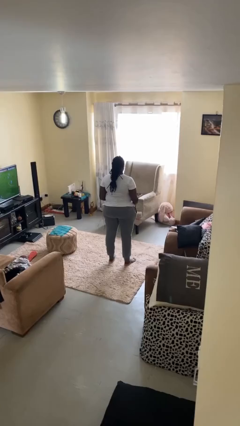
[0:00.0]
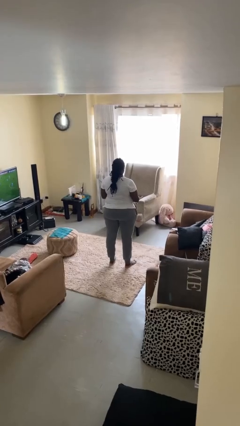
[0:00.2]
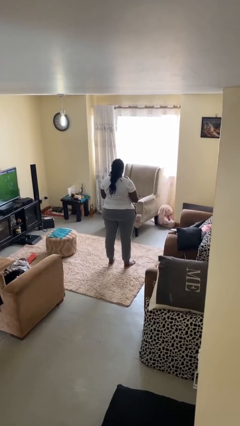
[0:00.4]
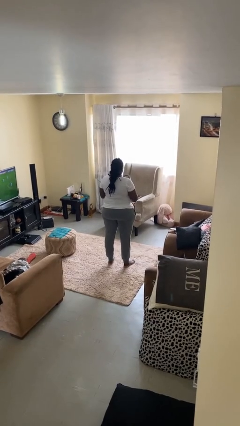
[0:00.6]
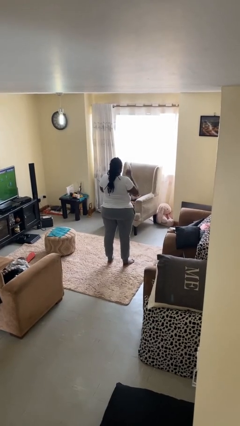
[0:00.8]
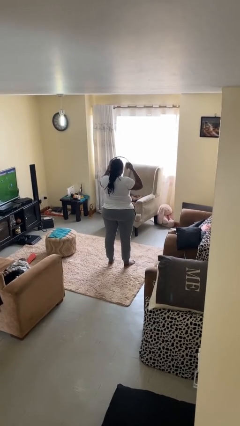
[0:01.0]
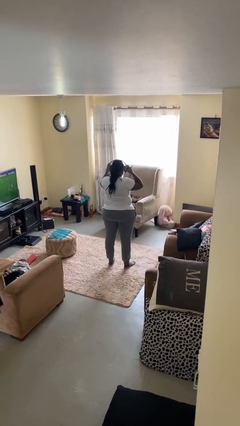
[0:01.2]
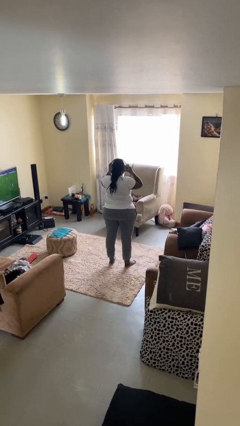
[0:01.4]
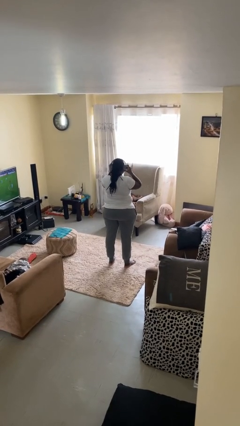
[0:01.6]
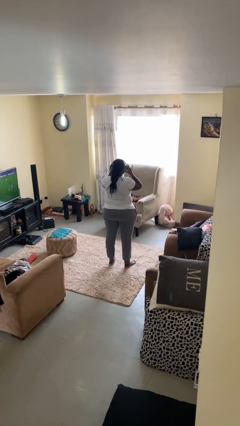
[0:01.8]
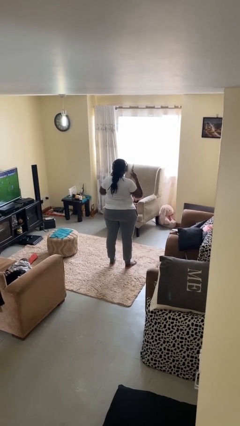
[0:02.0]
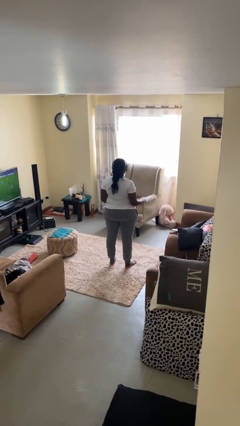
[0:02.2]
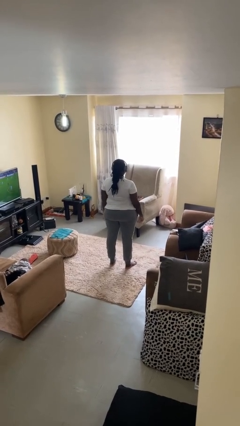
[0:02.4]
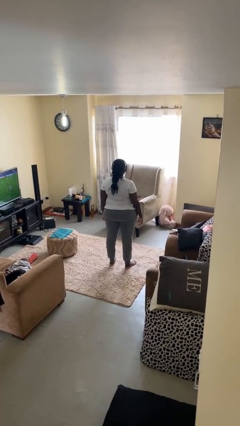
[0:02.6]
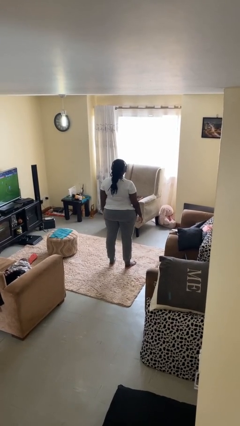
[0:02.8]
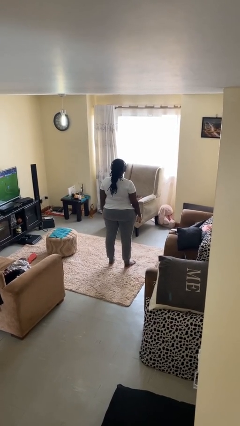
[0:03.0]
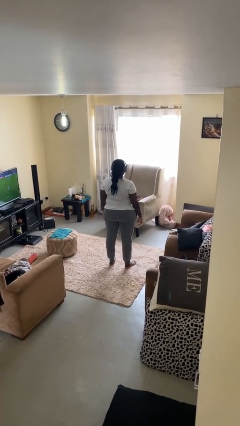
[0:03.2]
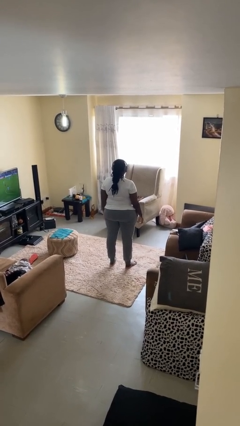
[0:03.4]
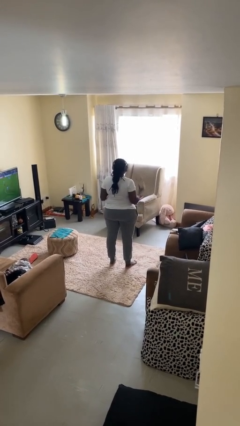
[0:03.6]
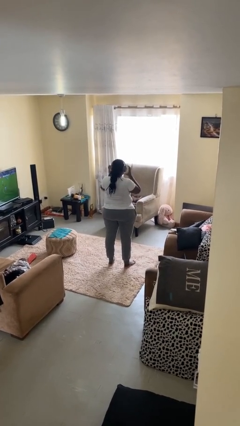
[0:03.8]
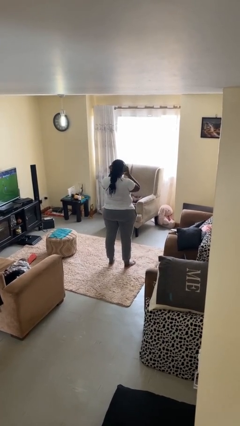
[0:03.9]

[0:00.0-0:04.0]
person puts on headphones

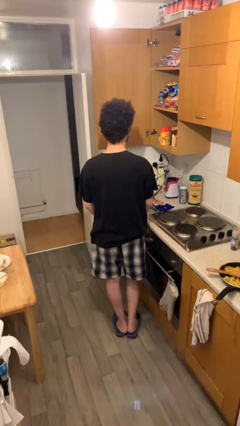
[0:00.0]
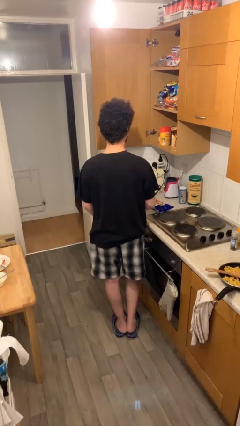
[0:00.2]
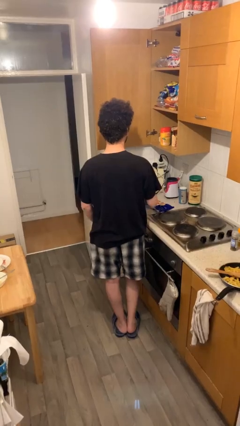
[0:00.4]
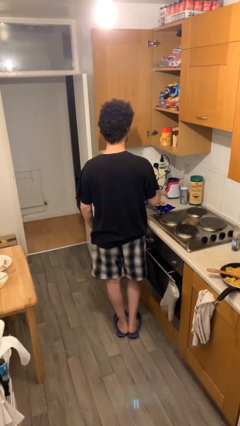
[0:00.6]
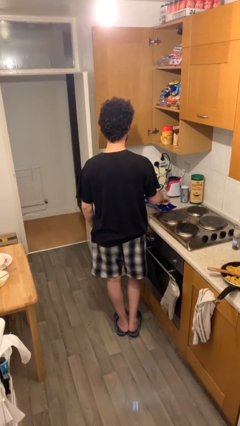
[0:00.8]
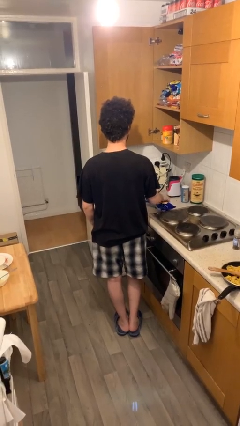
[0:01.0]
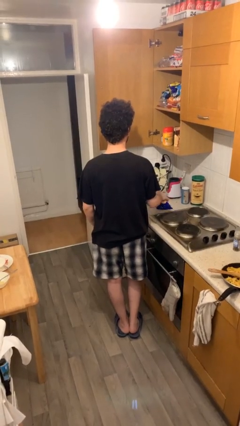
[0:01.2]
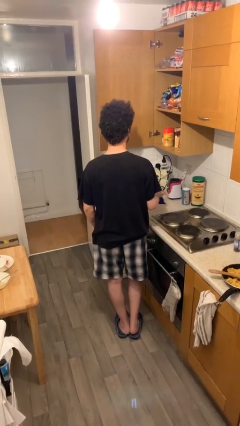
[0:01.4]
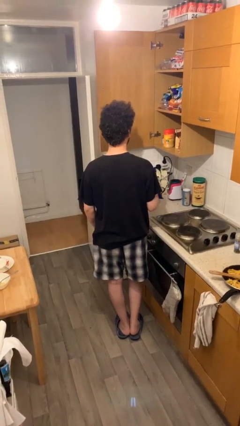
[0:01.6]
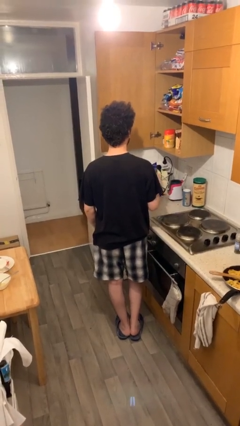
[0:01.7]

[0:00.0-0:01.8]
person picks up object from table

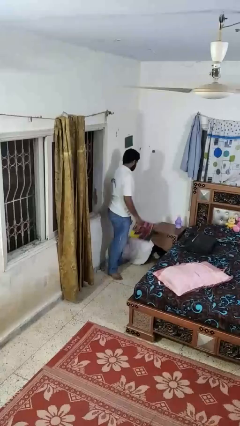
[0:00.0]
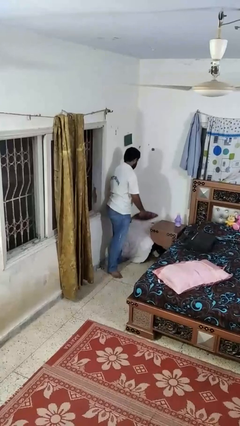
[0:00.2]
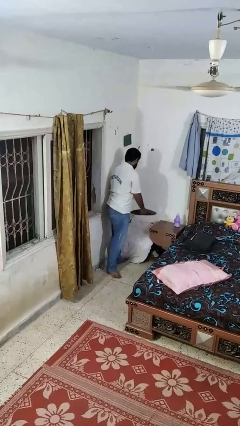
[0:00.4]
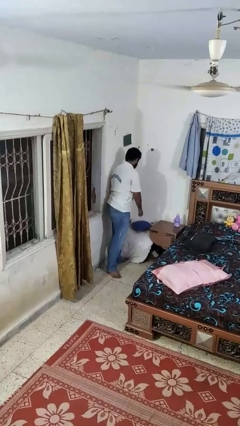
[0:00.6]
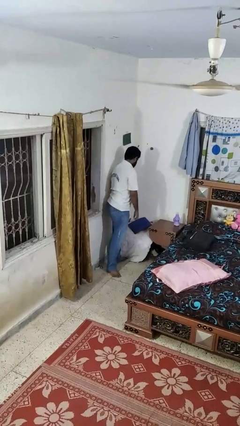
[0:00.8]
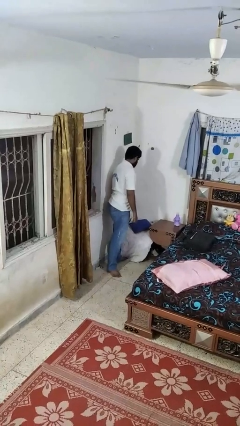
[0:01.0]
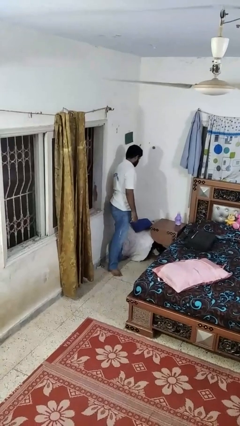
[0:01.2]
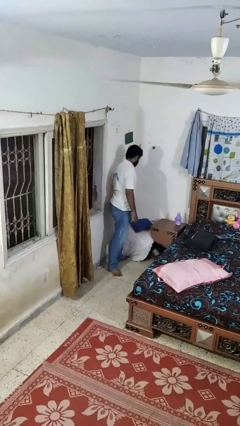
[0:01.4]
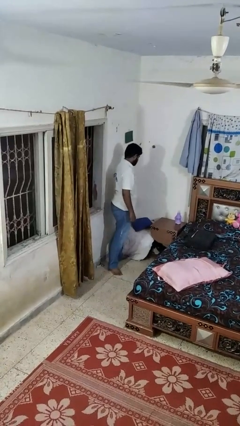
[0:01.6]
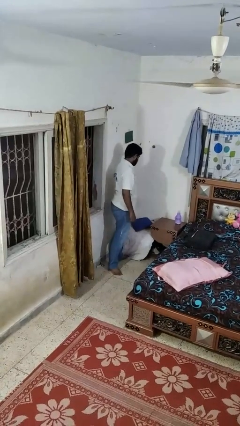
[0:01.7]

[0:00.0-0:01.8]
person puts down object on couch

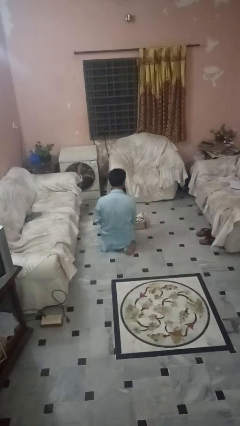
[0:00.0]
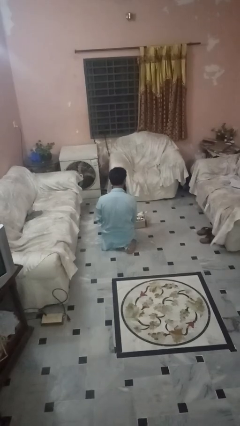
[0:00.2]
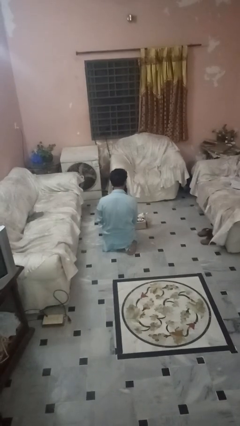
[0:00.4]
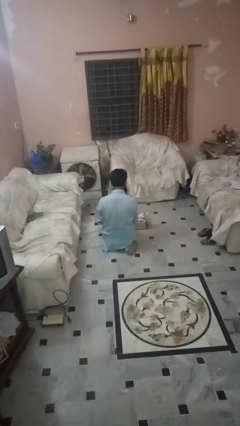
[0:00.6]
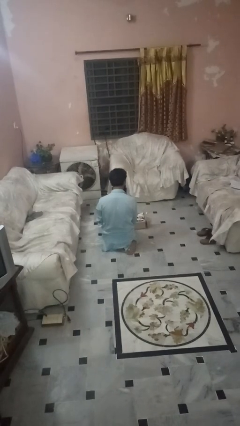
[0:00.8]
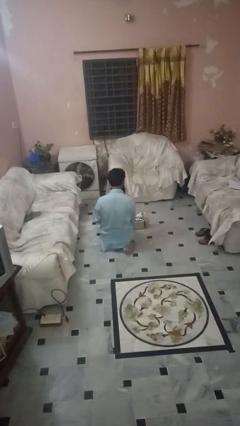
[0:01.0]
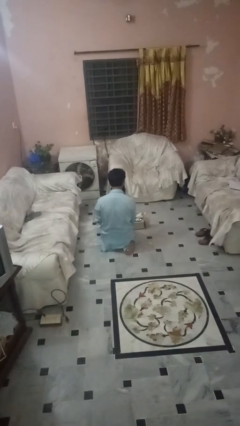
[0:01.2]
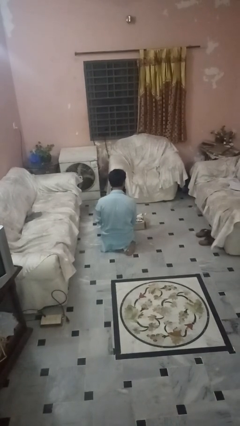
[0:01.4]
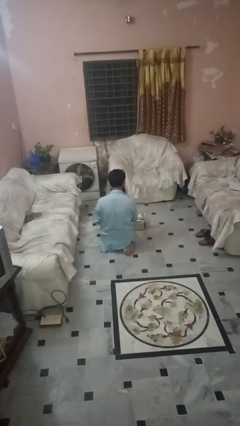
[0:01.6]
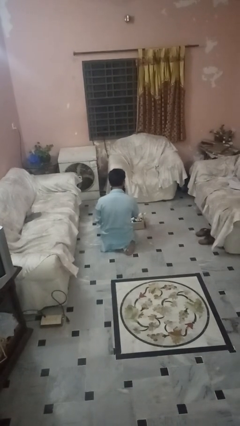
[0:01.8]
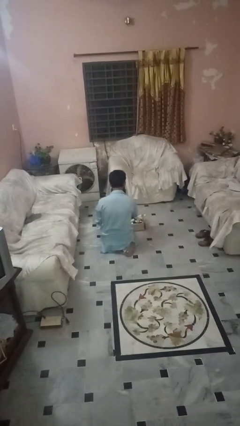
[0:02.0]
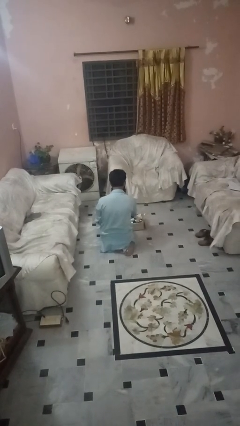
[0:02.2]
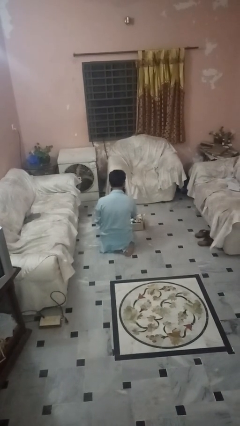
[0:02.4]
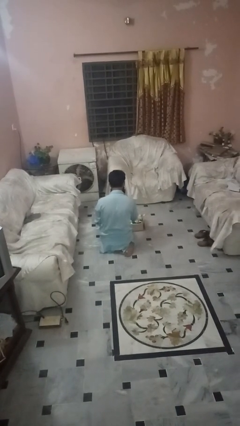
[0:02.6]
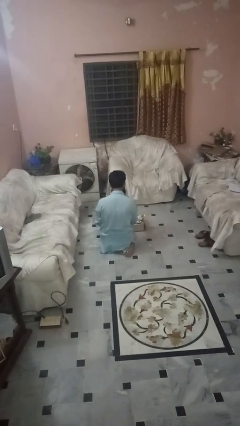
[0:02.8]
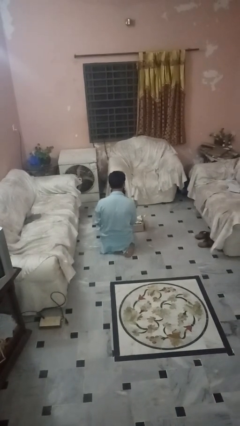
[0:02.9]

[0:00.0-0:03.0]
person takes object from box

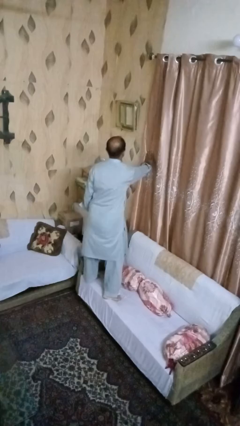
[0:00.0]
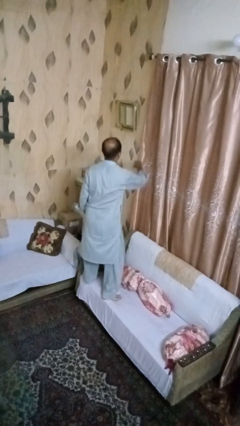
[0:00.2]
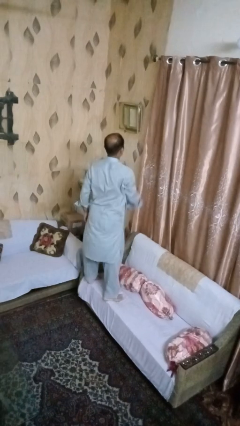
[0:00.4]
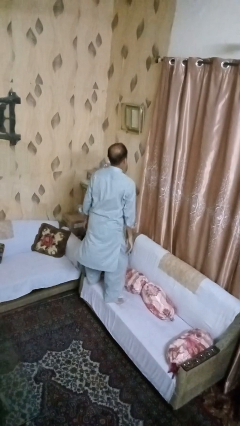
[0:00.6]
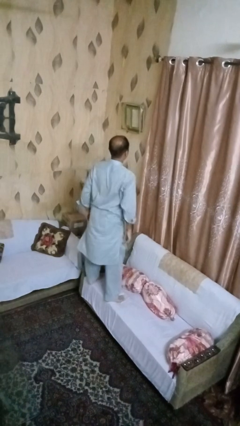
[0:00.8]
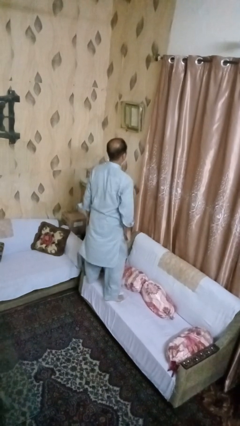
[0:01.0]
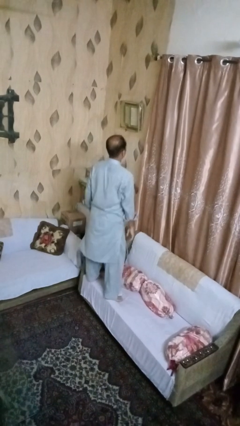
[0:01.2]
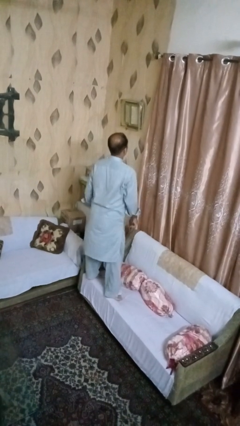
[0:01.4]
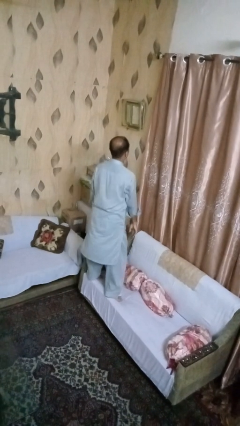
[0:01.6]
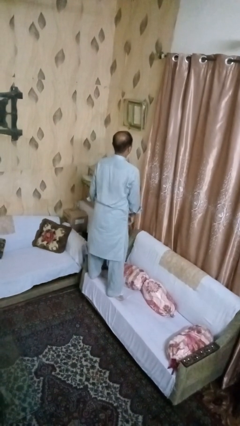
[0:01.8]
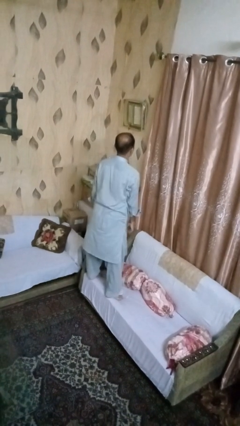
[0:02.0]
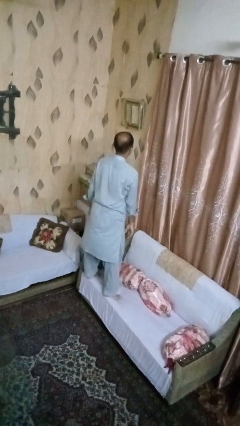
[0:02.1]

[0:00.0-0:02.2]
person jumps on couch

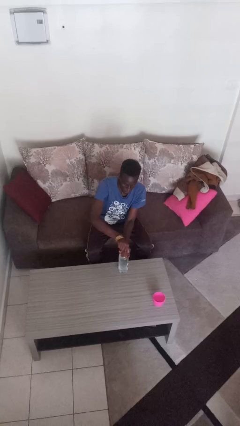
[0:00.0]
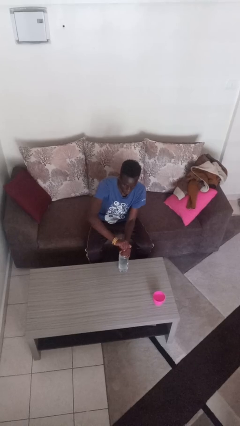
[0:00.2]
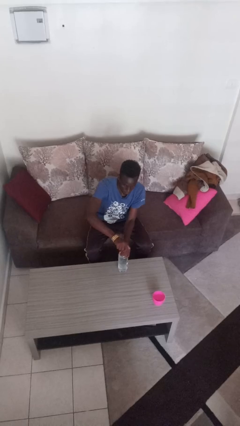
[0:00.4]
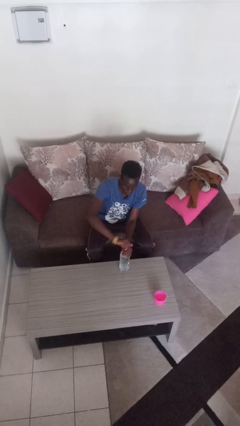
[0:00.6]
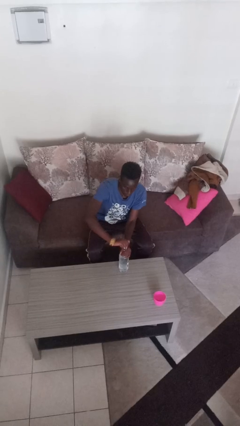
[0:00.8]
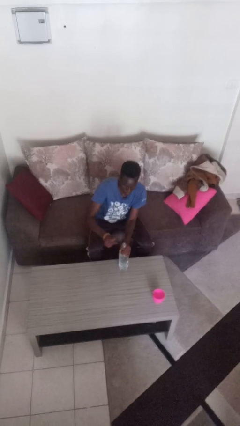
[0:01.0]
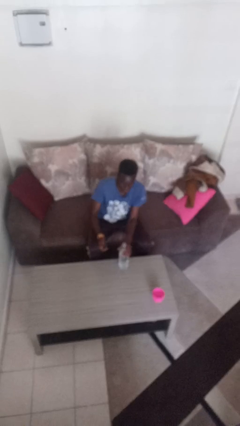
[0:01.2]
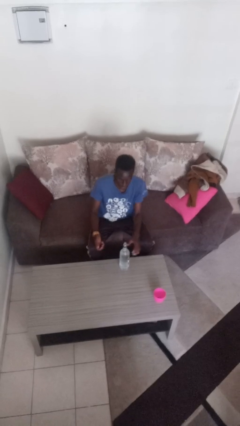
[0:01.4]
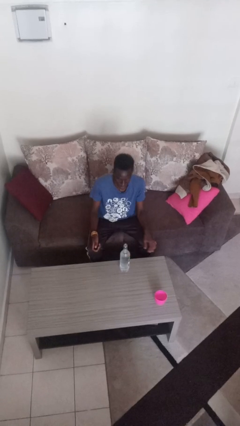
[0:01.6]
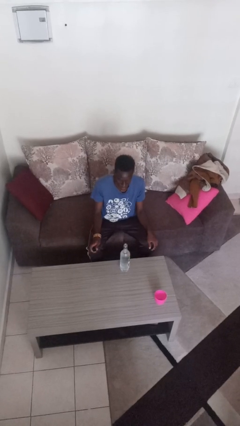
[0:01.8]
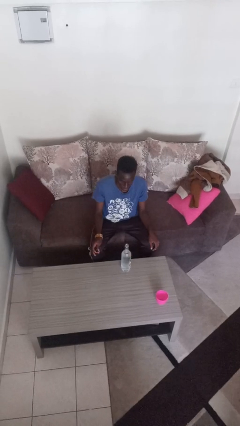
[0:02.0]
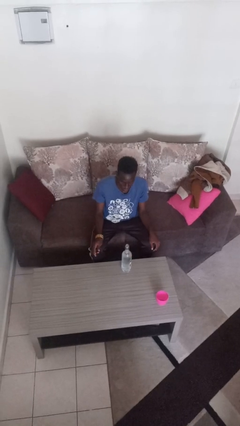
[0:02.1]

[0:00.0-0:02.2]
person unscrews lid from bottle

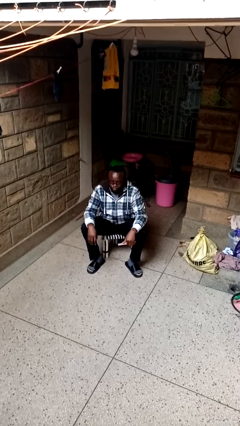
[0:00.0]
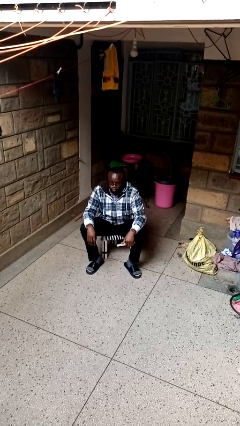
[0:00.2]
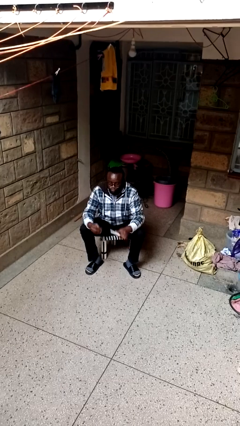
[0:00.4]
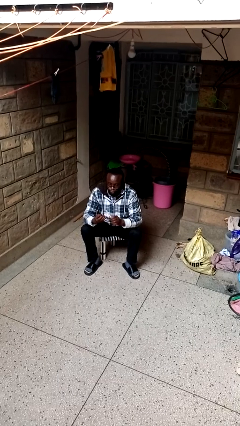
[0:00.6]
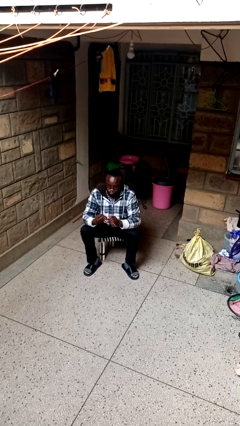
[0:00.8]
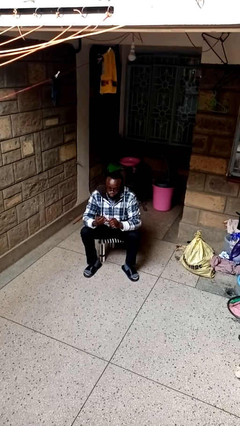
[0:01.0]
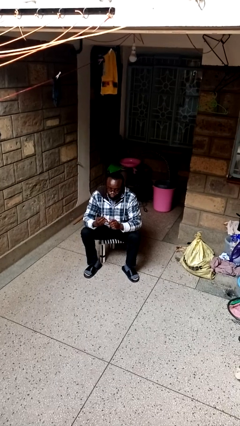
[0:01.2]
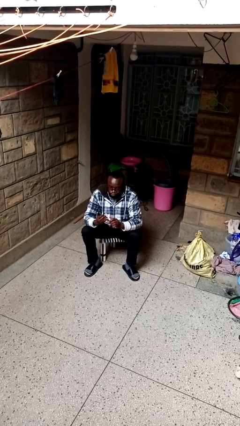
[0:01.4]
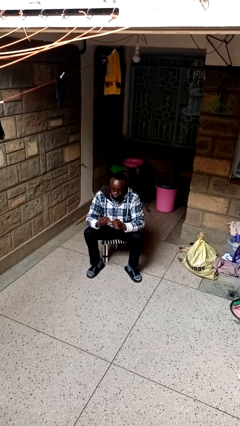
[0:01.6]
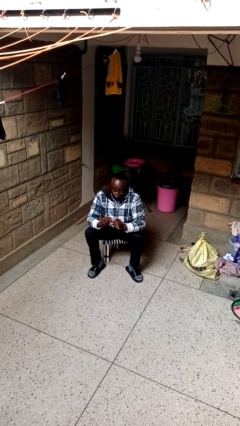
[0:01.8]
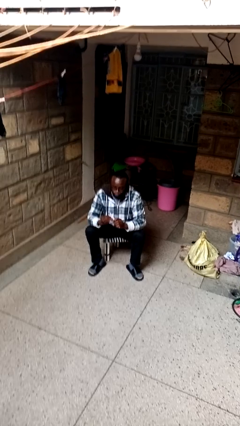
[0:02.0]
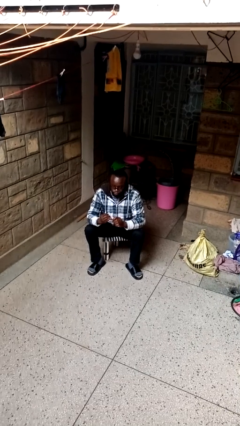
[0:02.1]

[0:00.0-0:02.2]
person files fingernails
